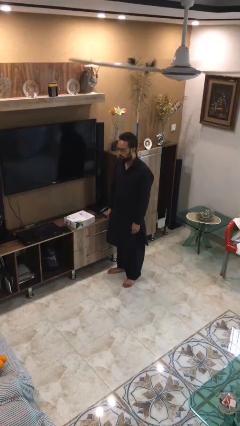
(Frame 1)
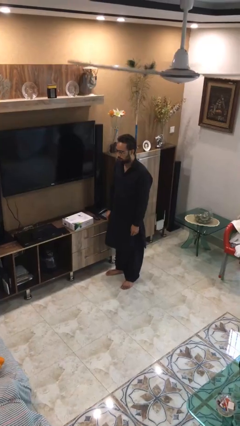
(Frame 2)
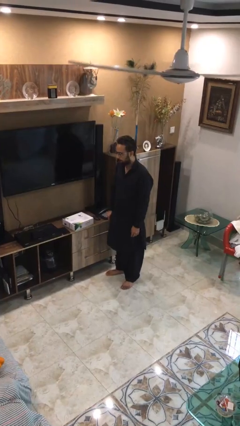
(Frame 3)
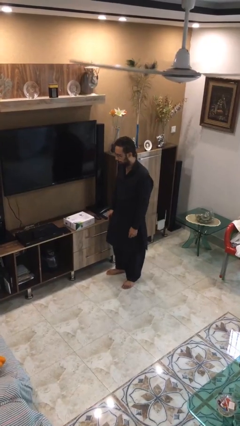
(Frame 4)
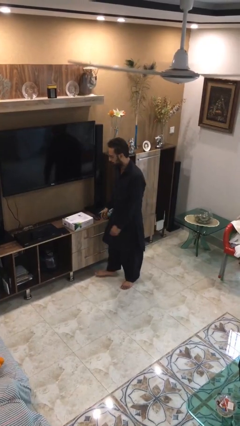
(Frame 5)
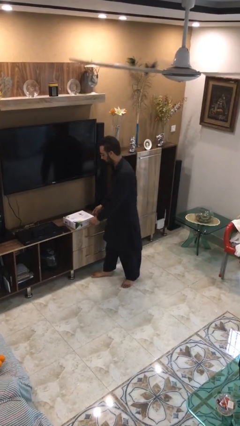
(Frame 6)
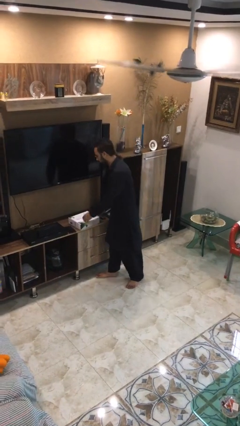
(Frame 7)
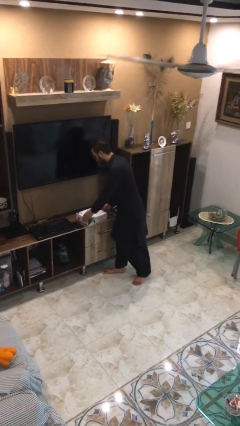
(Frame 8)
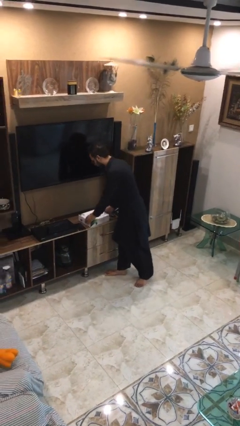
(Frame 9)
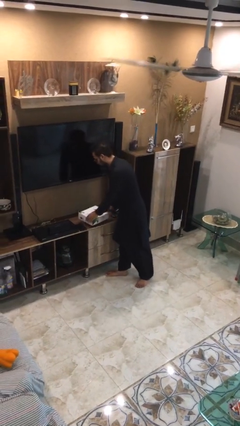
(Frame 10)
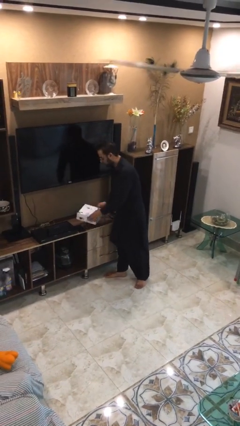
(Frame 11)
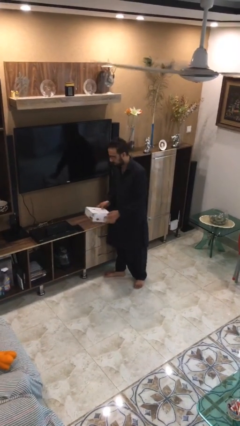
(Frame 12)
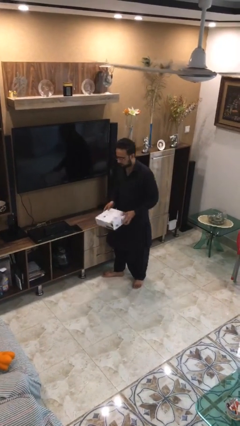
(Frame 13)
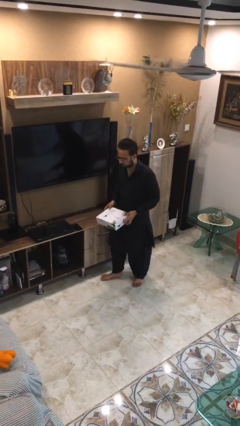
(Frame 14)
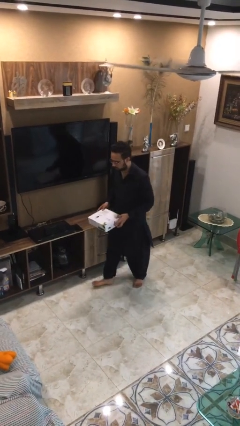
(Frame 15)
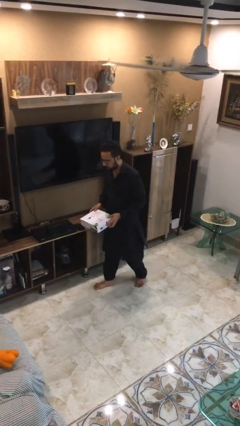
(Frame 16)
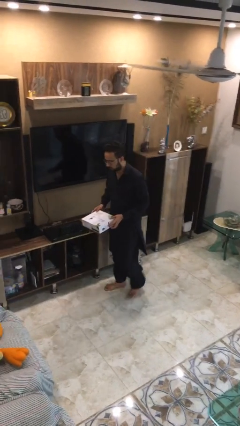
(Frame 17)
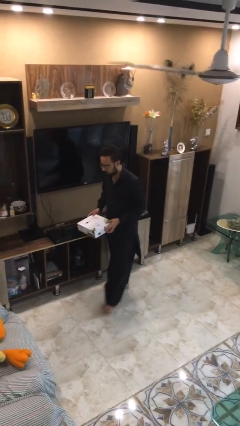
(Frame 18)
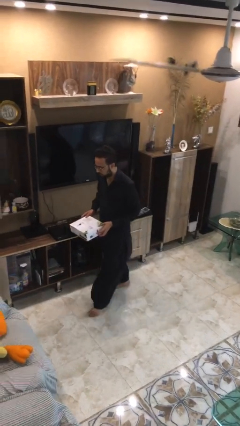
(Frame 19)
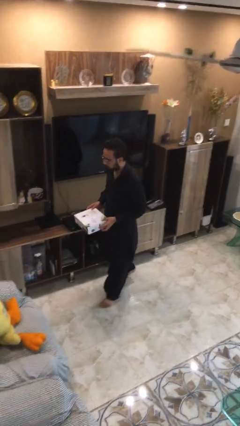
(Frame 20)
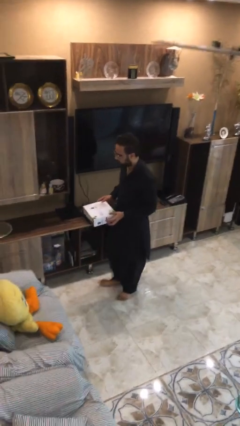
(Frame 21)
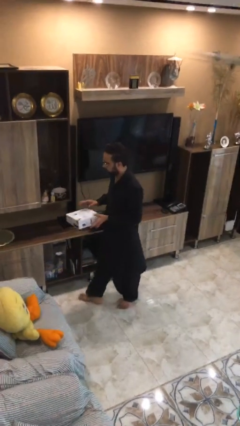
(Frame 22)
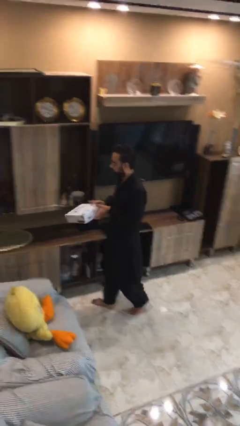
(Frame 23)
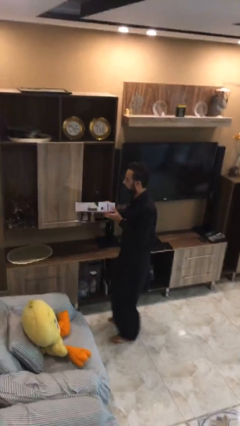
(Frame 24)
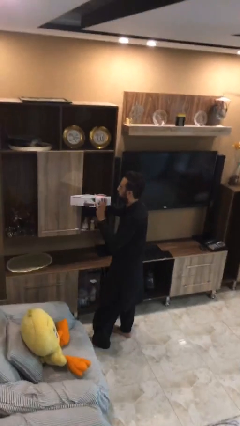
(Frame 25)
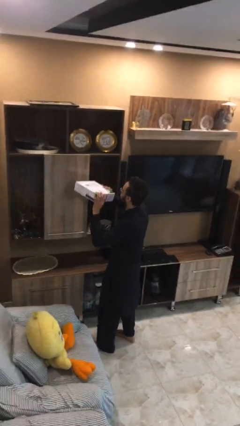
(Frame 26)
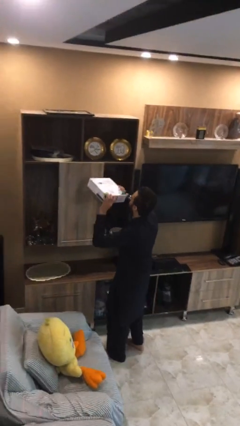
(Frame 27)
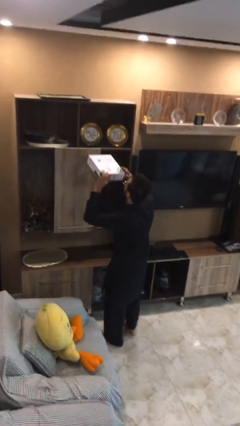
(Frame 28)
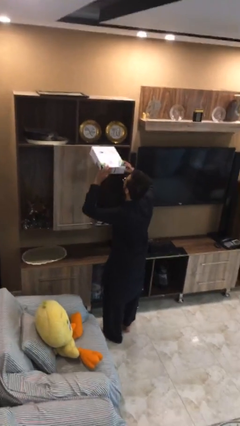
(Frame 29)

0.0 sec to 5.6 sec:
person picks up object from table

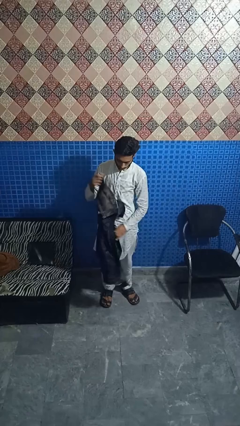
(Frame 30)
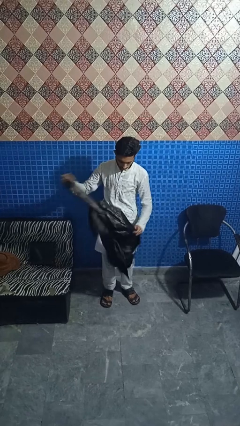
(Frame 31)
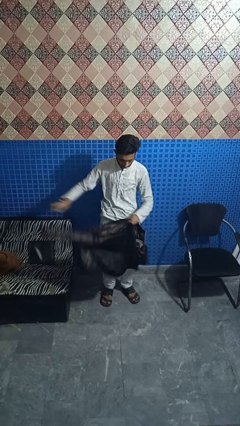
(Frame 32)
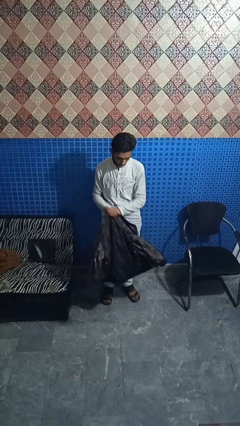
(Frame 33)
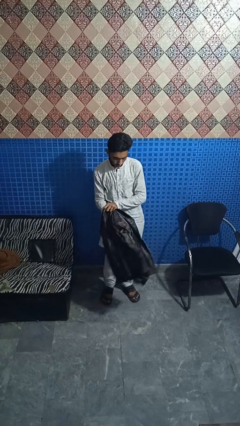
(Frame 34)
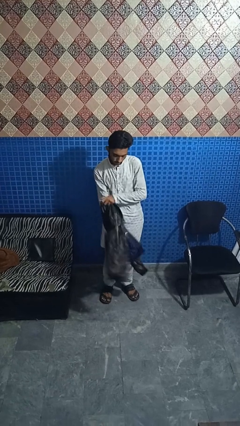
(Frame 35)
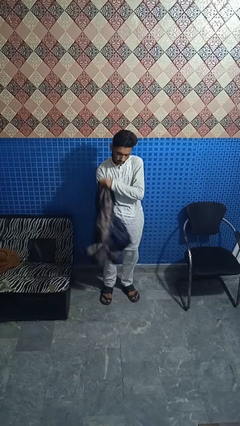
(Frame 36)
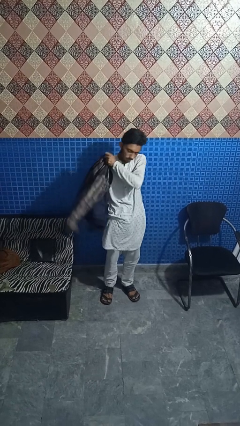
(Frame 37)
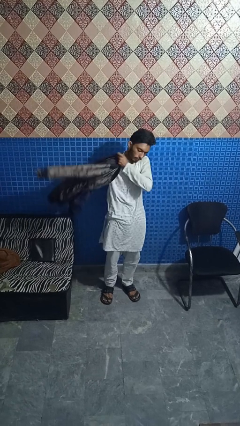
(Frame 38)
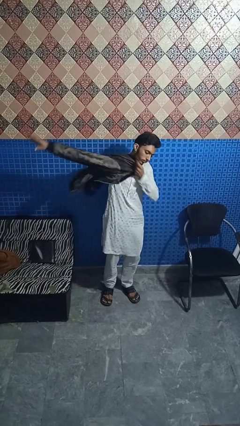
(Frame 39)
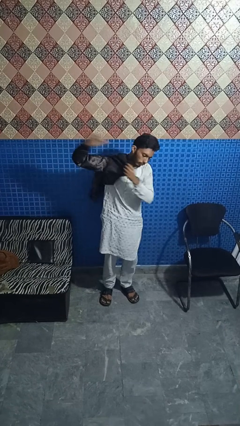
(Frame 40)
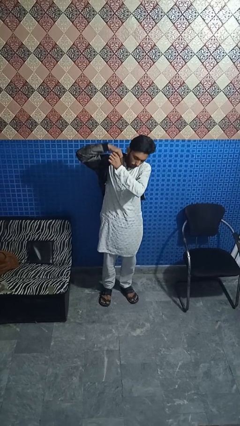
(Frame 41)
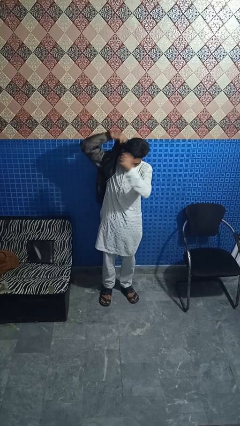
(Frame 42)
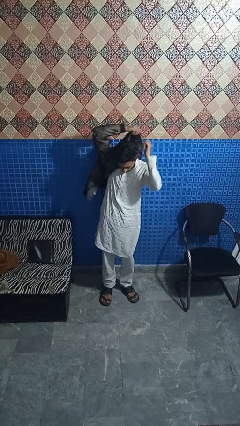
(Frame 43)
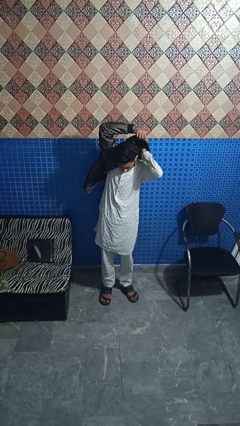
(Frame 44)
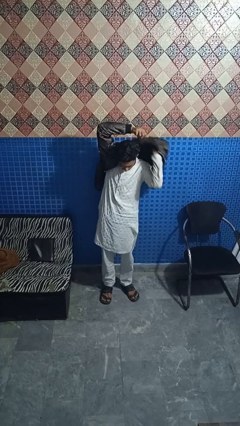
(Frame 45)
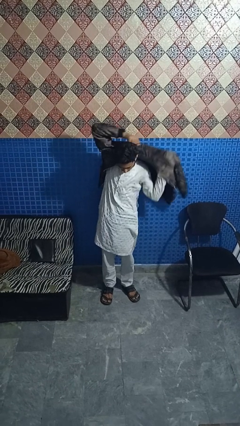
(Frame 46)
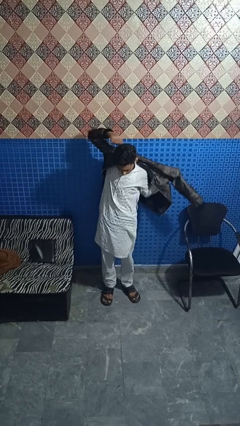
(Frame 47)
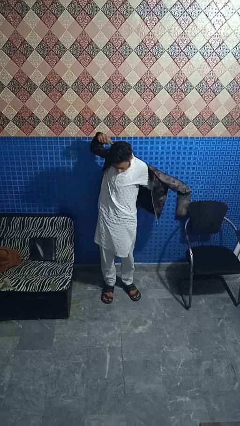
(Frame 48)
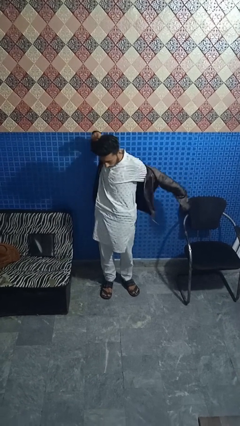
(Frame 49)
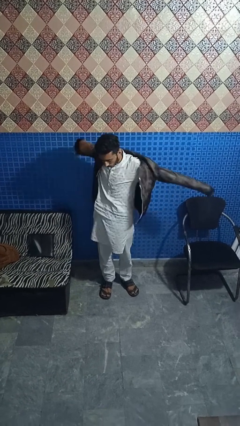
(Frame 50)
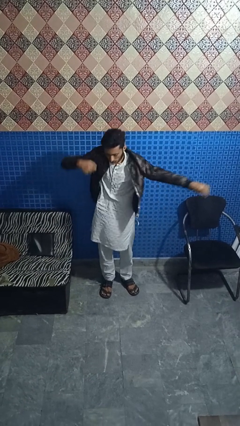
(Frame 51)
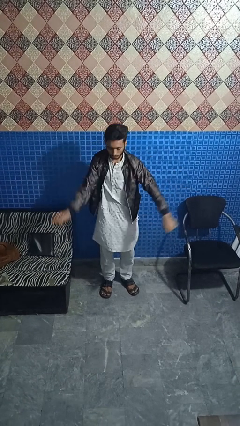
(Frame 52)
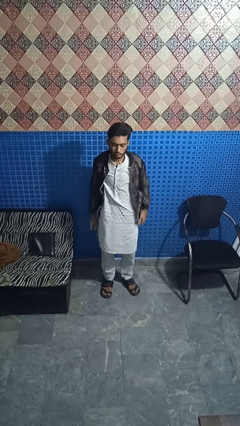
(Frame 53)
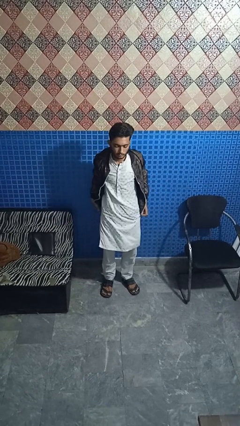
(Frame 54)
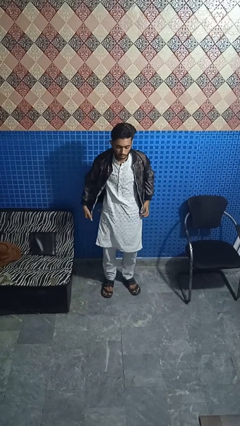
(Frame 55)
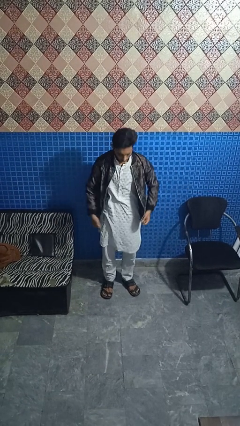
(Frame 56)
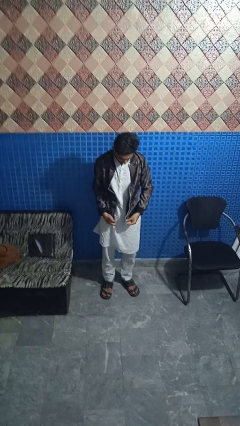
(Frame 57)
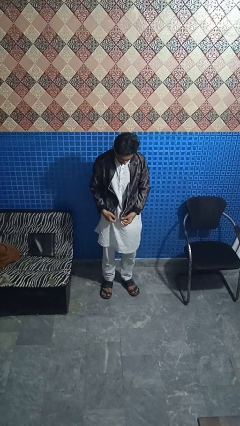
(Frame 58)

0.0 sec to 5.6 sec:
person puts on jacket

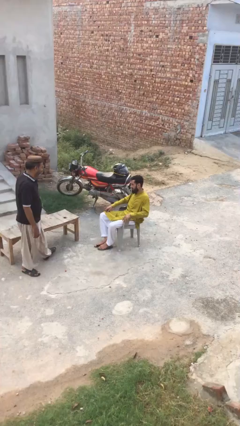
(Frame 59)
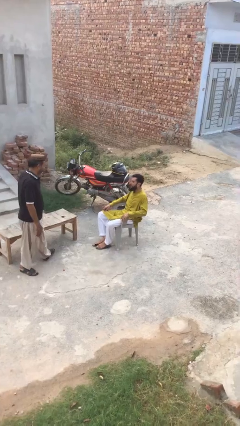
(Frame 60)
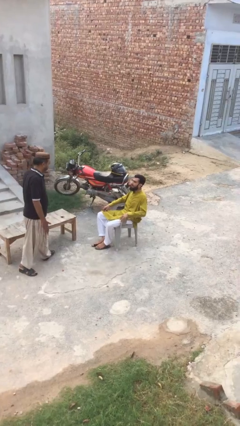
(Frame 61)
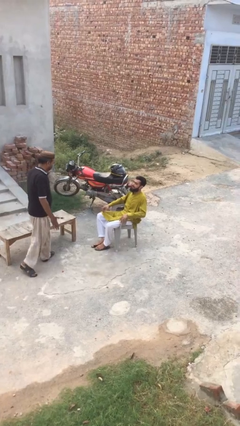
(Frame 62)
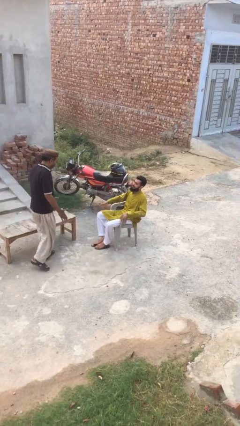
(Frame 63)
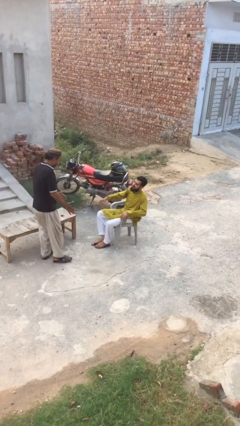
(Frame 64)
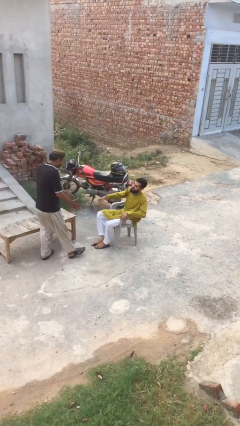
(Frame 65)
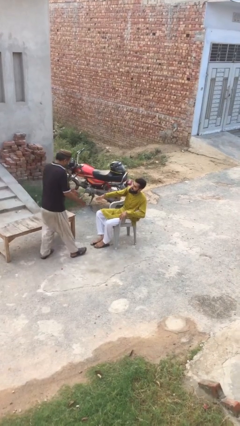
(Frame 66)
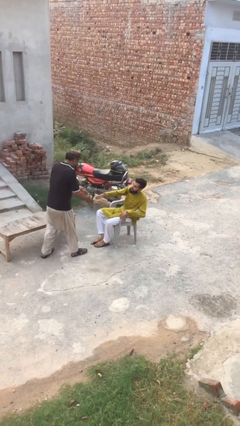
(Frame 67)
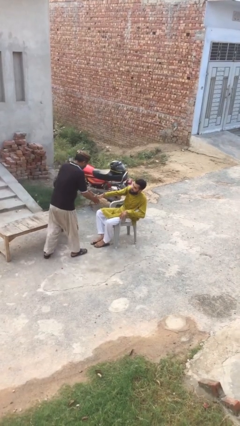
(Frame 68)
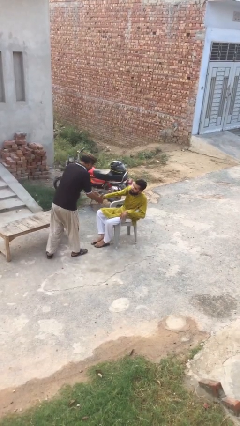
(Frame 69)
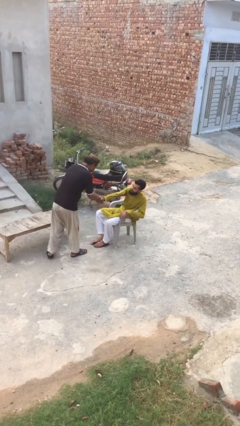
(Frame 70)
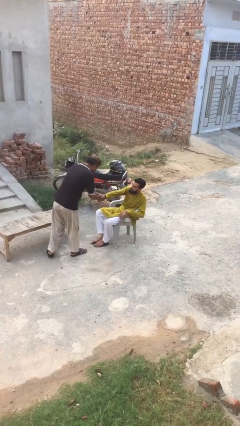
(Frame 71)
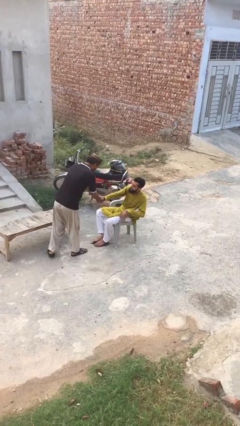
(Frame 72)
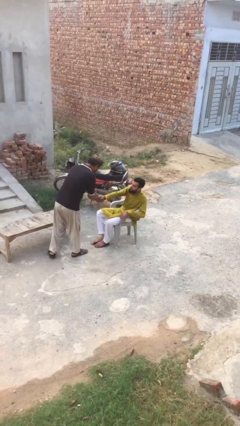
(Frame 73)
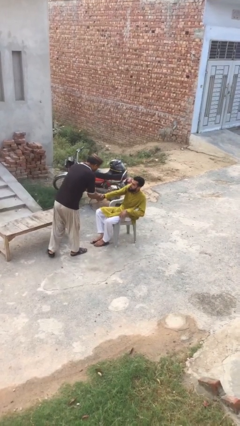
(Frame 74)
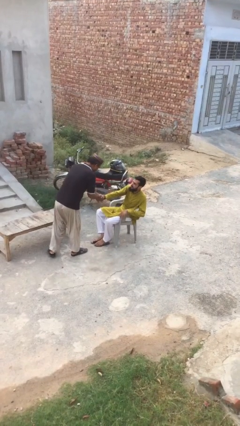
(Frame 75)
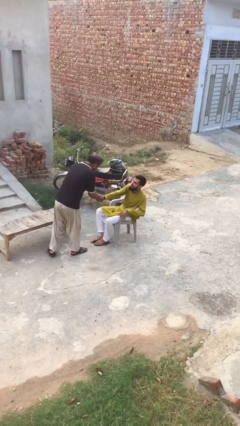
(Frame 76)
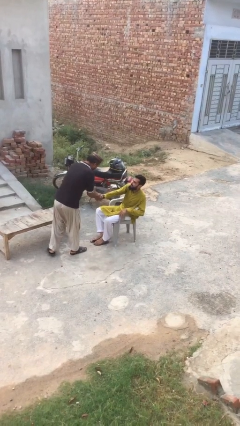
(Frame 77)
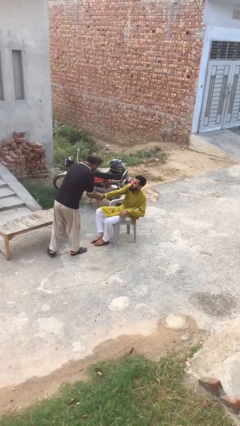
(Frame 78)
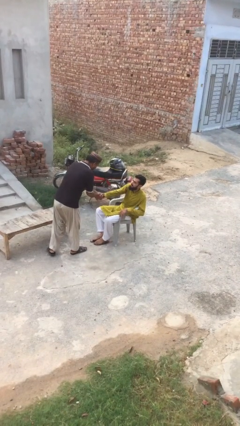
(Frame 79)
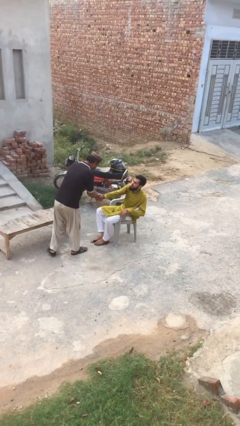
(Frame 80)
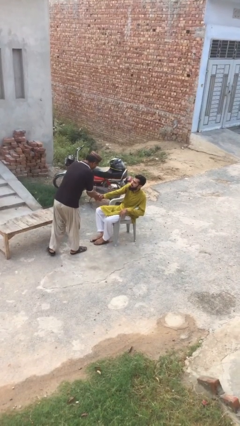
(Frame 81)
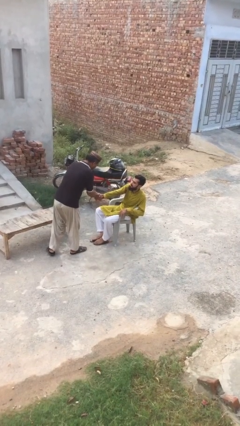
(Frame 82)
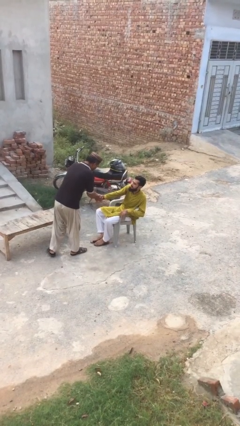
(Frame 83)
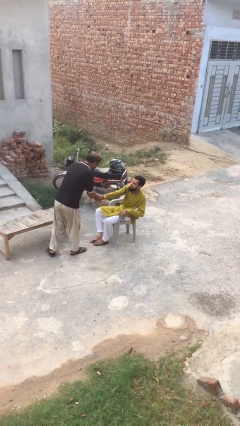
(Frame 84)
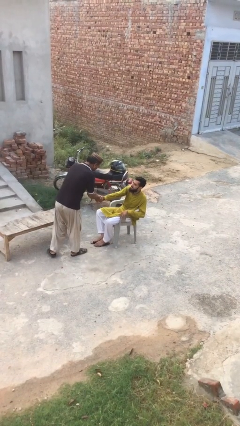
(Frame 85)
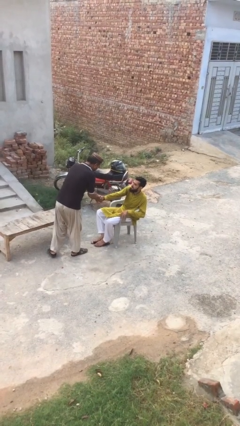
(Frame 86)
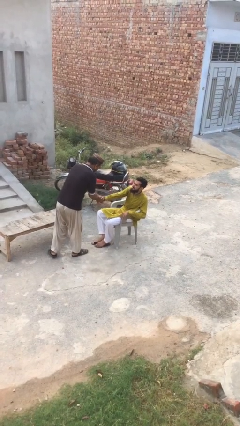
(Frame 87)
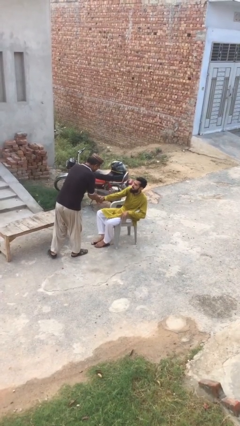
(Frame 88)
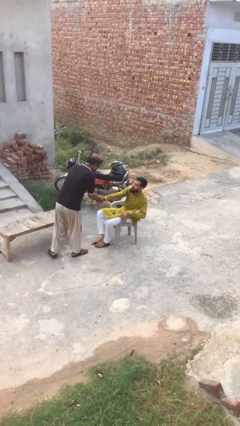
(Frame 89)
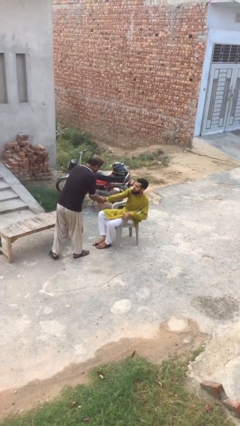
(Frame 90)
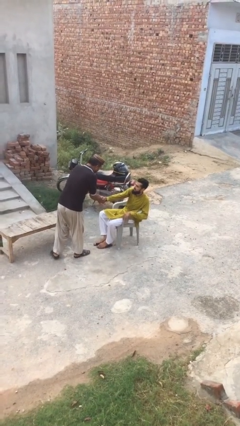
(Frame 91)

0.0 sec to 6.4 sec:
person shakes hand
